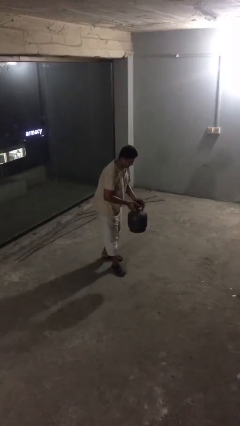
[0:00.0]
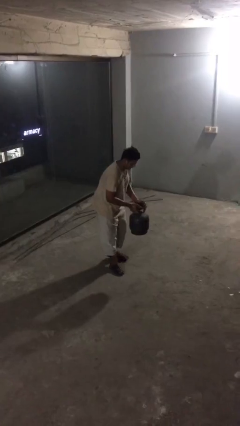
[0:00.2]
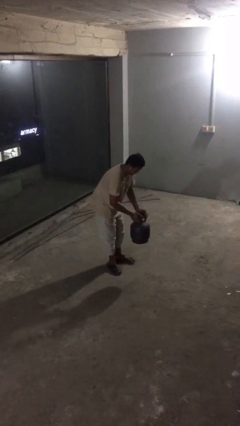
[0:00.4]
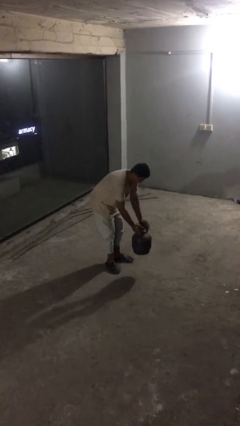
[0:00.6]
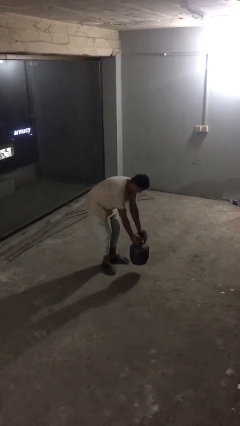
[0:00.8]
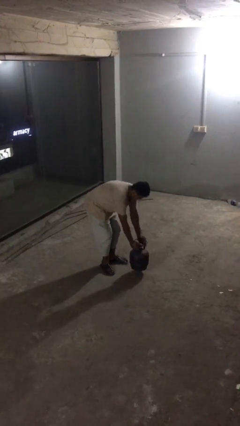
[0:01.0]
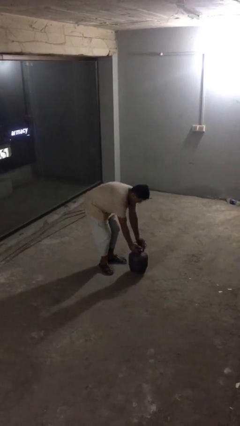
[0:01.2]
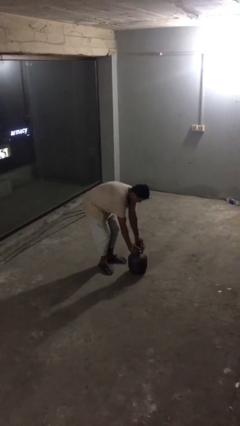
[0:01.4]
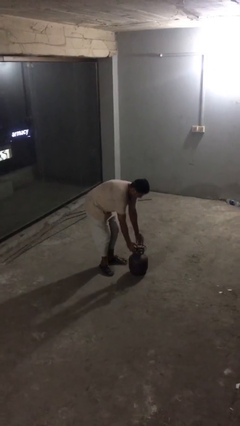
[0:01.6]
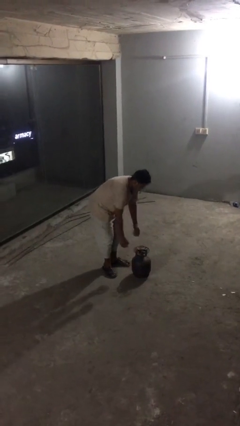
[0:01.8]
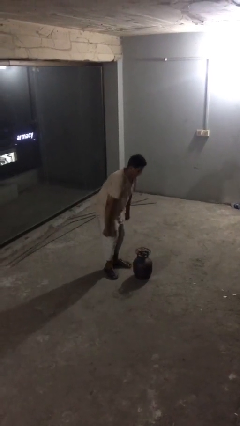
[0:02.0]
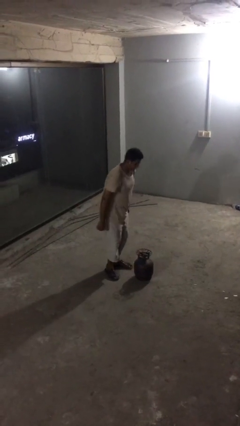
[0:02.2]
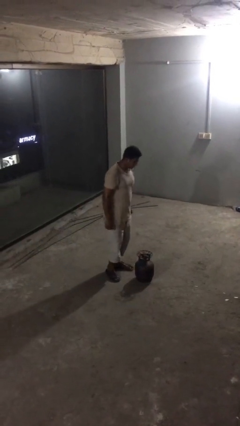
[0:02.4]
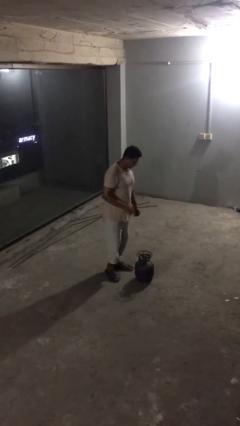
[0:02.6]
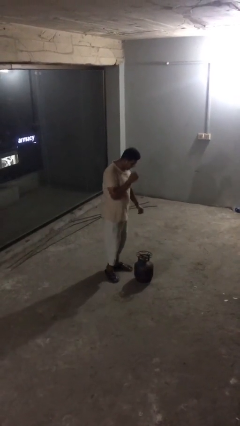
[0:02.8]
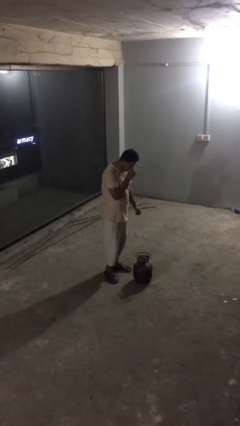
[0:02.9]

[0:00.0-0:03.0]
person puts down object on floor

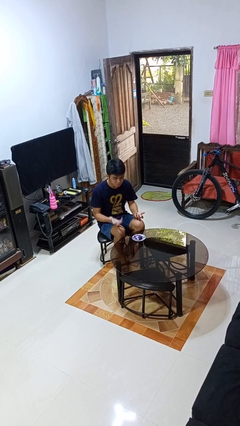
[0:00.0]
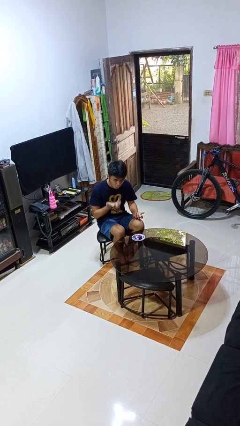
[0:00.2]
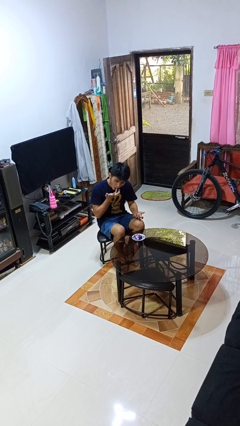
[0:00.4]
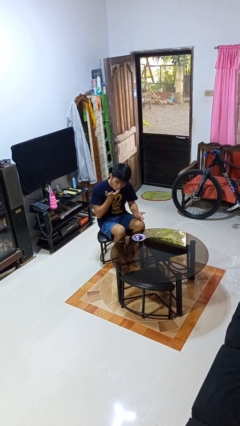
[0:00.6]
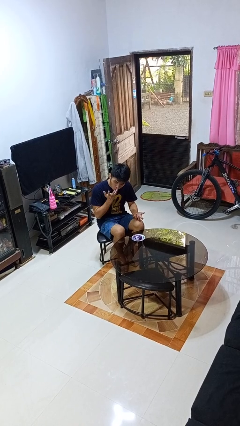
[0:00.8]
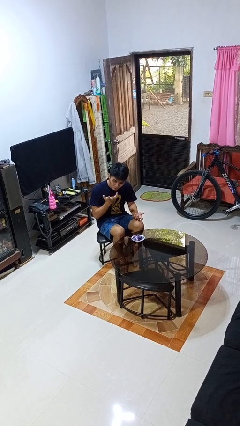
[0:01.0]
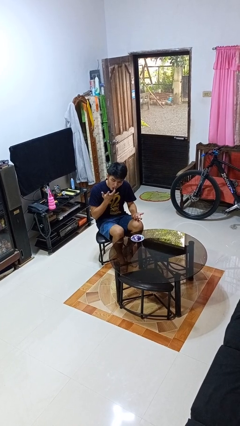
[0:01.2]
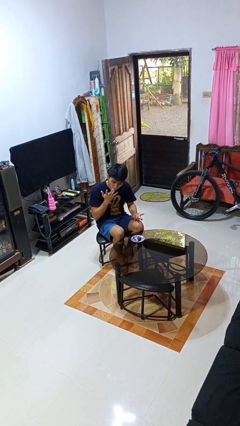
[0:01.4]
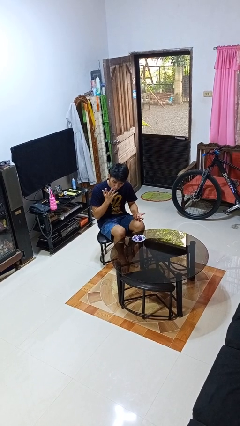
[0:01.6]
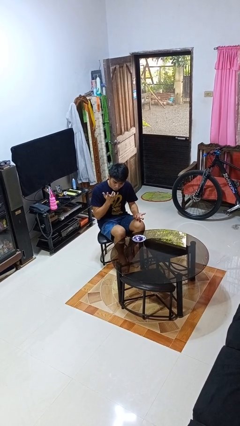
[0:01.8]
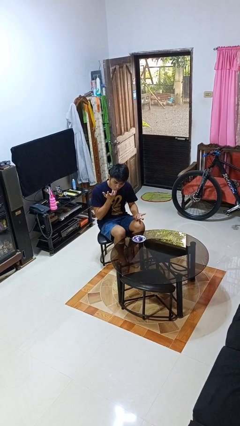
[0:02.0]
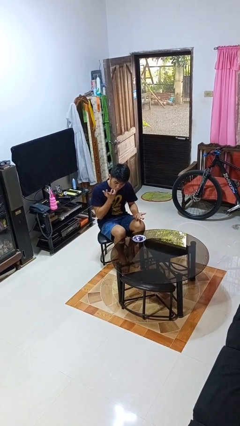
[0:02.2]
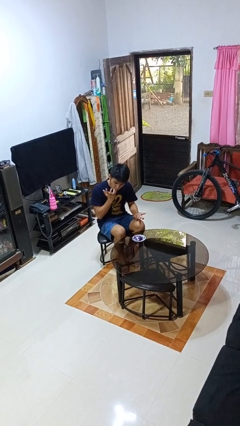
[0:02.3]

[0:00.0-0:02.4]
person licks fingers

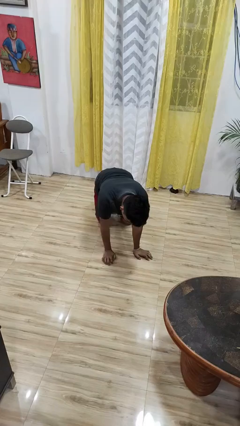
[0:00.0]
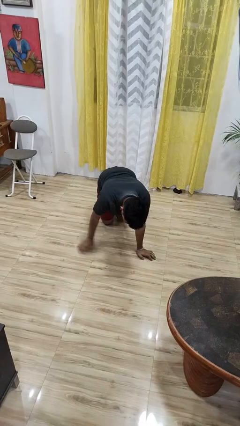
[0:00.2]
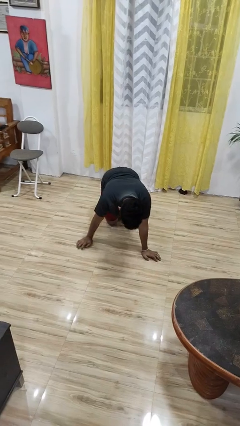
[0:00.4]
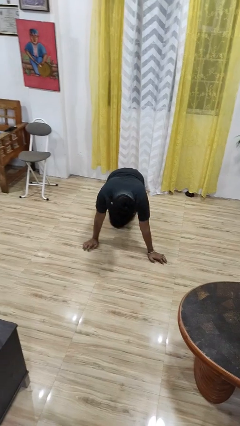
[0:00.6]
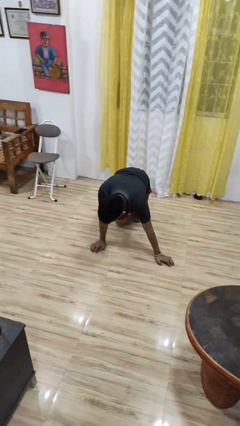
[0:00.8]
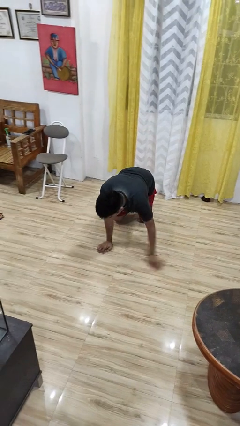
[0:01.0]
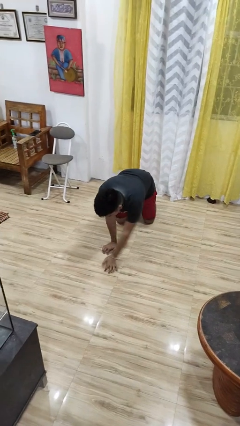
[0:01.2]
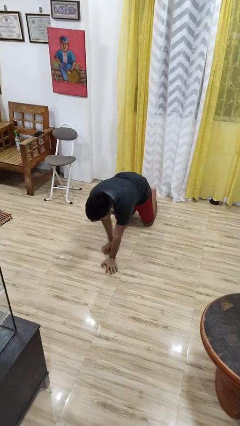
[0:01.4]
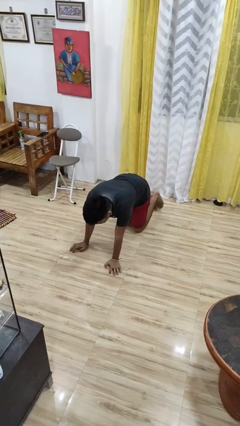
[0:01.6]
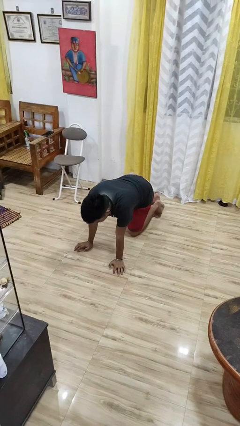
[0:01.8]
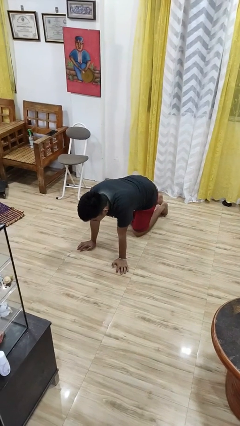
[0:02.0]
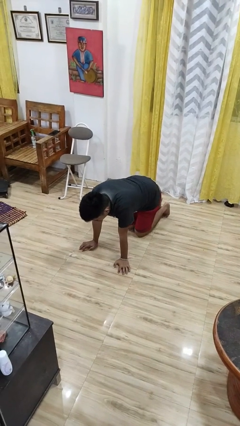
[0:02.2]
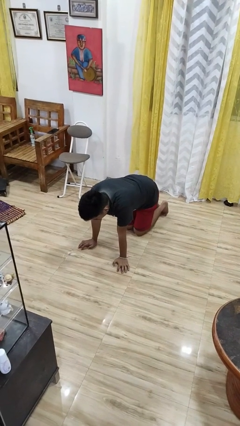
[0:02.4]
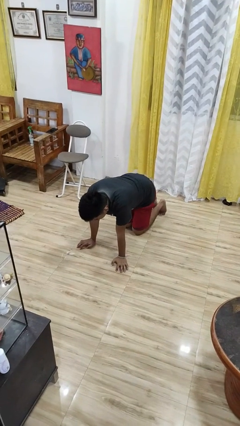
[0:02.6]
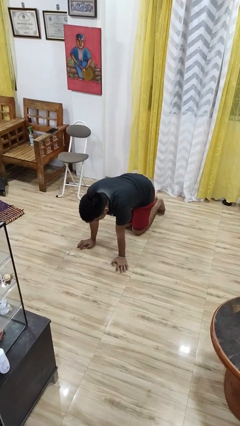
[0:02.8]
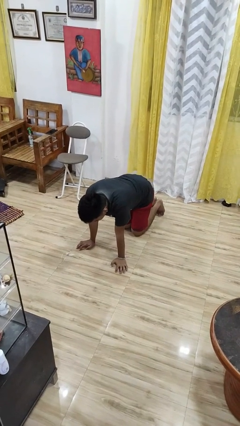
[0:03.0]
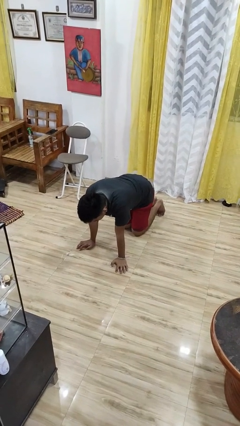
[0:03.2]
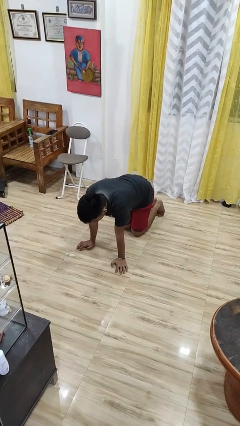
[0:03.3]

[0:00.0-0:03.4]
person crawls

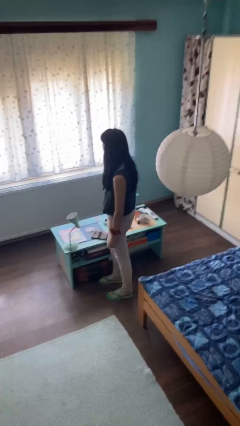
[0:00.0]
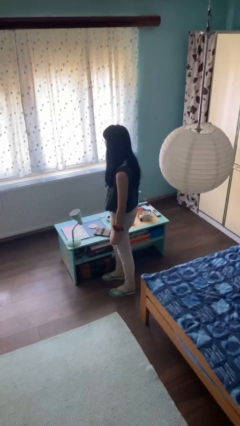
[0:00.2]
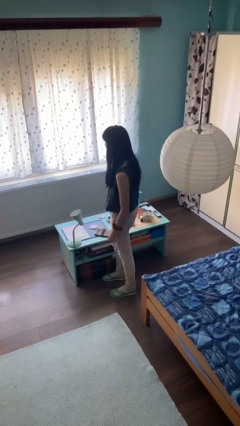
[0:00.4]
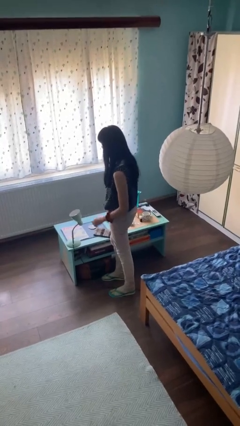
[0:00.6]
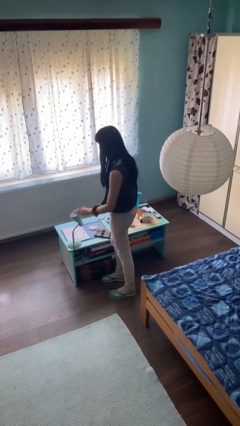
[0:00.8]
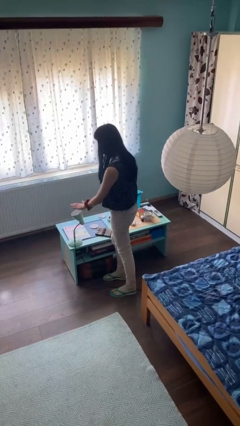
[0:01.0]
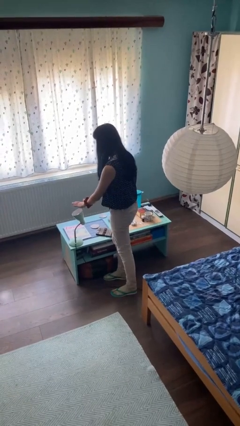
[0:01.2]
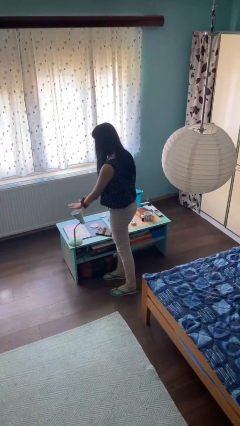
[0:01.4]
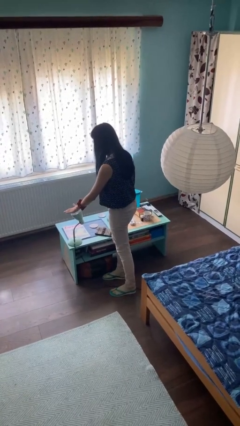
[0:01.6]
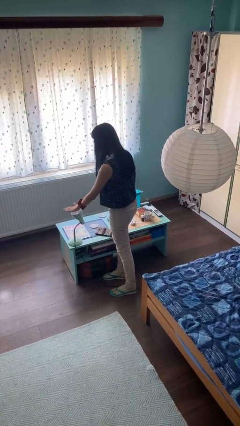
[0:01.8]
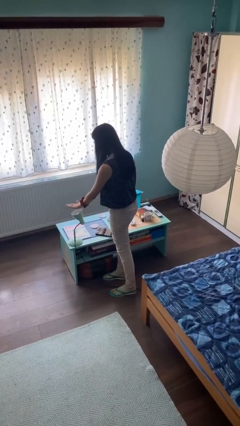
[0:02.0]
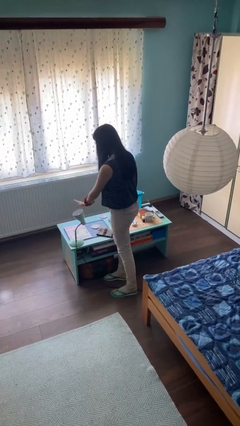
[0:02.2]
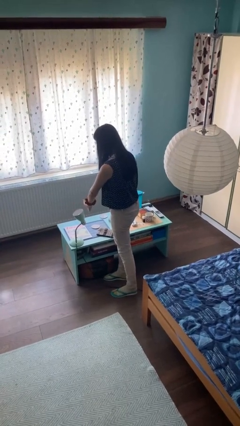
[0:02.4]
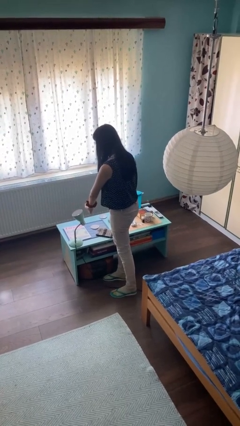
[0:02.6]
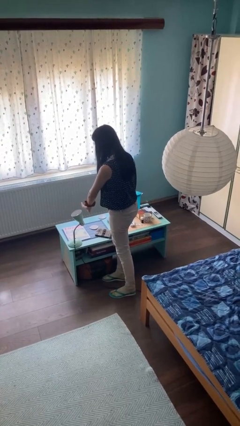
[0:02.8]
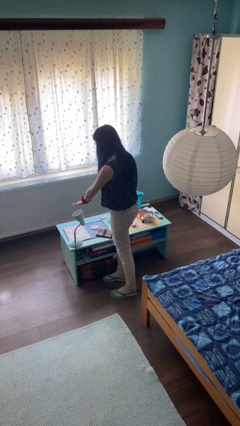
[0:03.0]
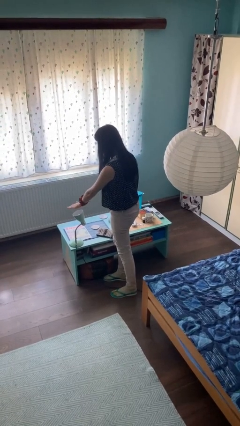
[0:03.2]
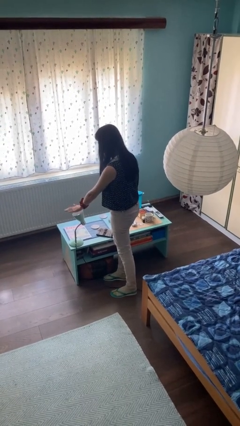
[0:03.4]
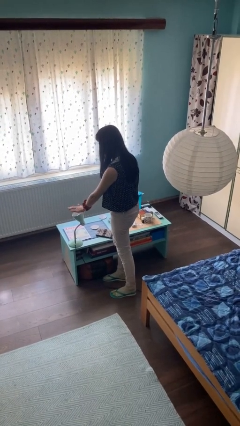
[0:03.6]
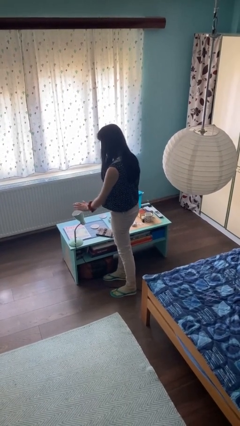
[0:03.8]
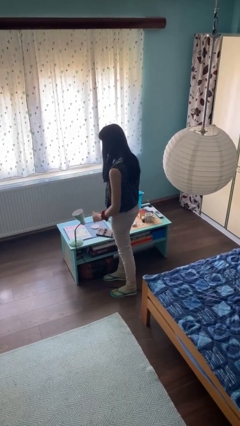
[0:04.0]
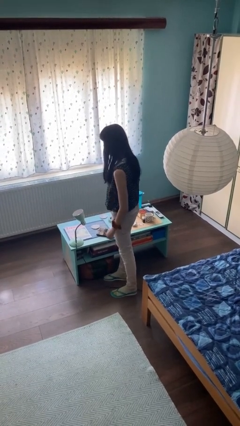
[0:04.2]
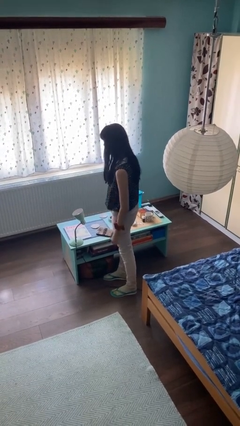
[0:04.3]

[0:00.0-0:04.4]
person waves hand over object

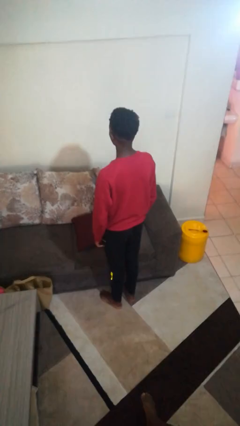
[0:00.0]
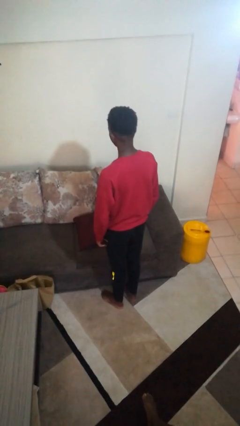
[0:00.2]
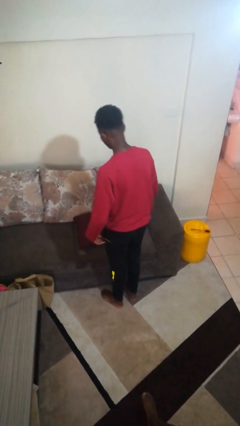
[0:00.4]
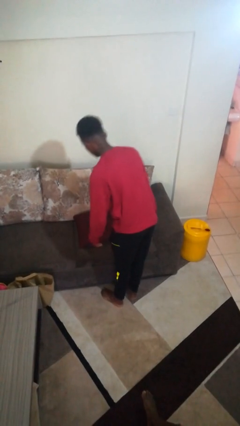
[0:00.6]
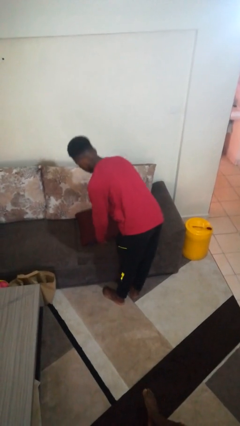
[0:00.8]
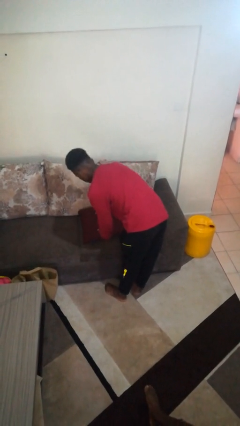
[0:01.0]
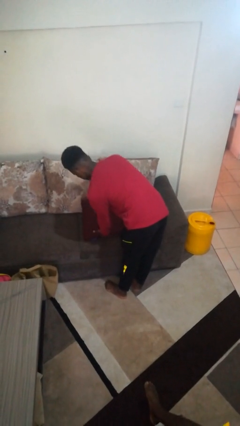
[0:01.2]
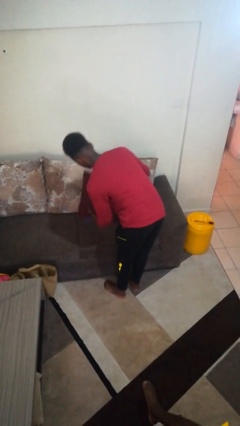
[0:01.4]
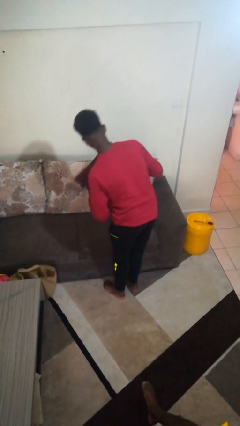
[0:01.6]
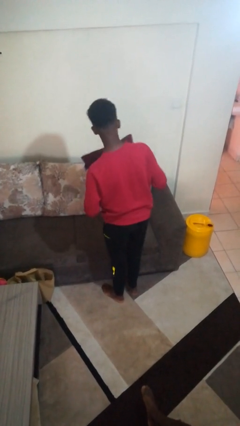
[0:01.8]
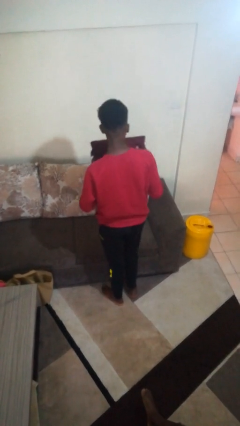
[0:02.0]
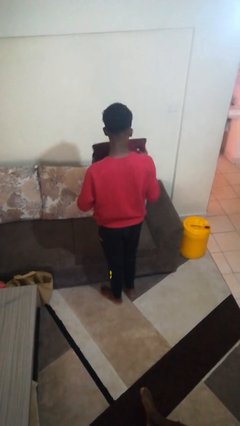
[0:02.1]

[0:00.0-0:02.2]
person picks up object from couch

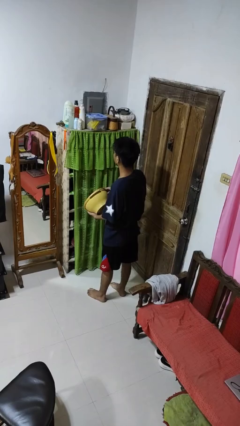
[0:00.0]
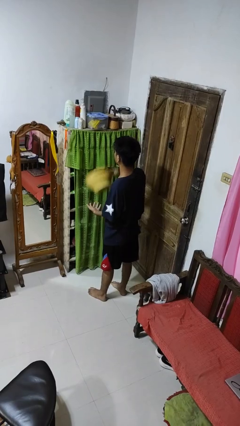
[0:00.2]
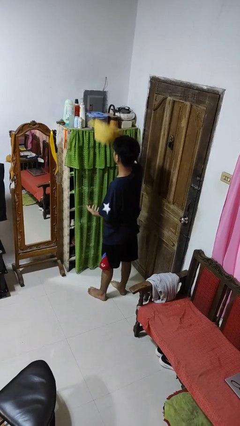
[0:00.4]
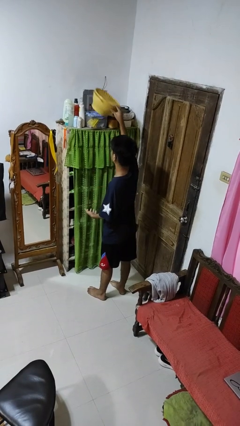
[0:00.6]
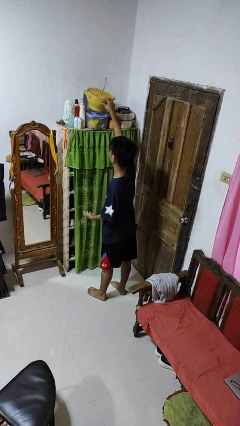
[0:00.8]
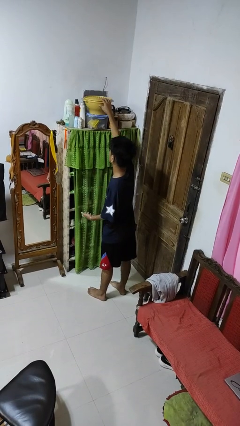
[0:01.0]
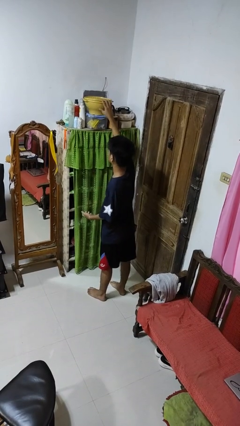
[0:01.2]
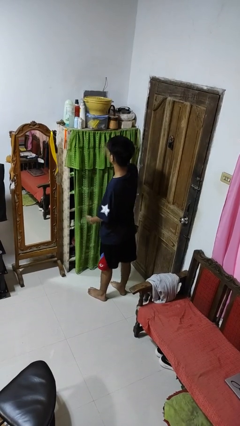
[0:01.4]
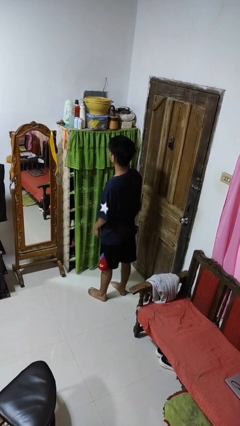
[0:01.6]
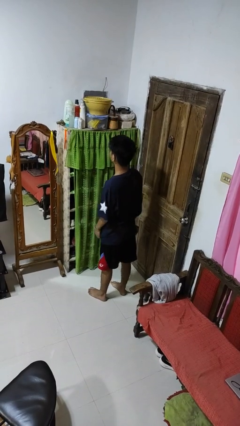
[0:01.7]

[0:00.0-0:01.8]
person puts down object on shelf
